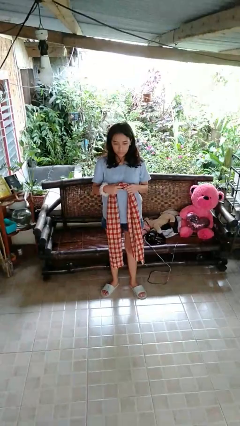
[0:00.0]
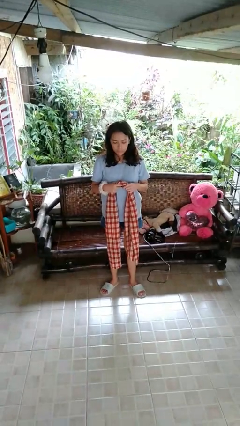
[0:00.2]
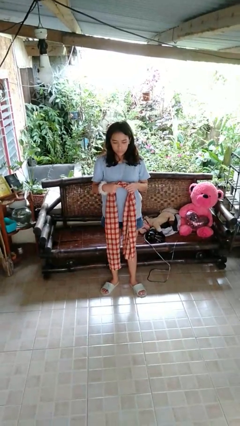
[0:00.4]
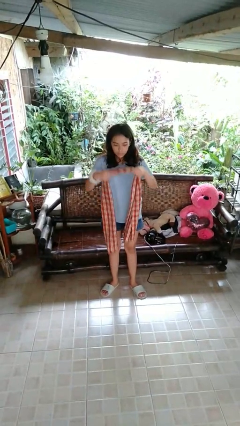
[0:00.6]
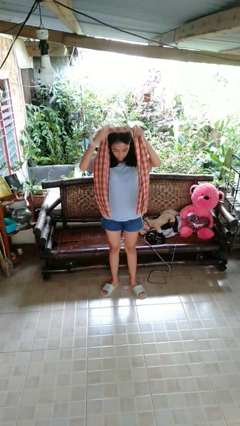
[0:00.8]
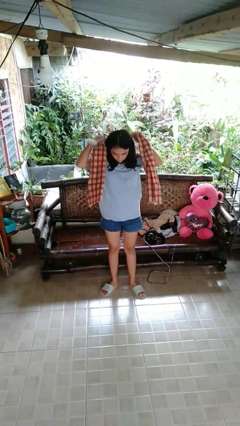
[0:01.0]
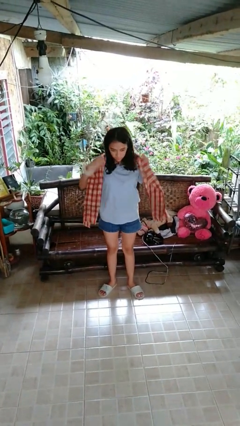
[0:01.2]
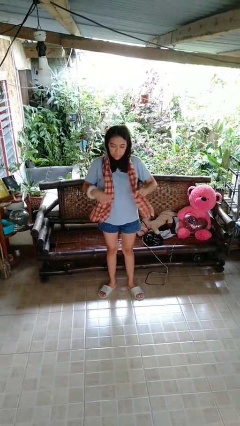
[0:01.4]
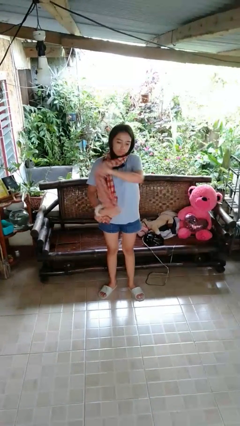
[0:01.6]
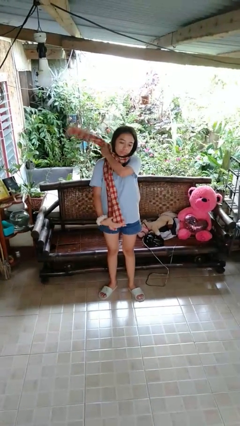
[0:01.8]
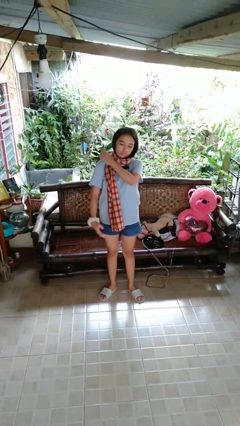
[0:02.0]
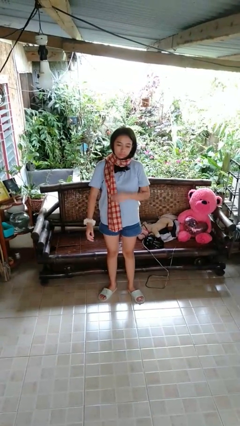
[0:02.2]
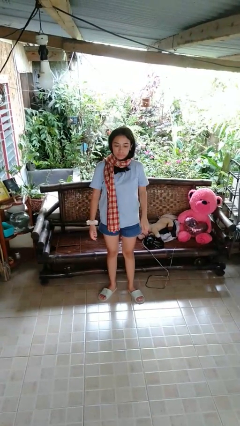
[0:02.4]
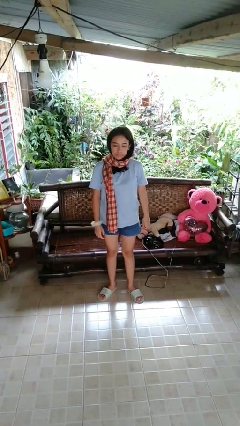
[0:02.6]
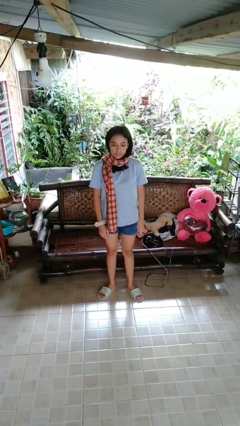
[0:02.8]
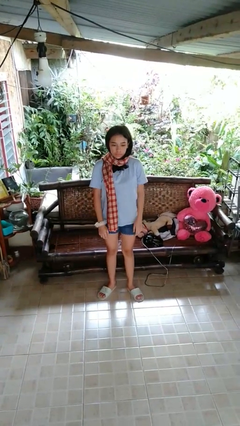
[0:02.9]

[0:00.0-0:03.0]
person puts on scarf

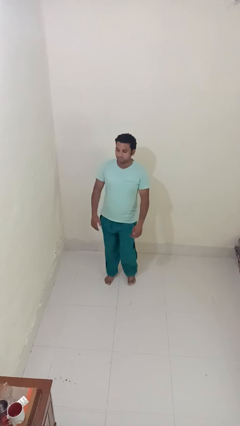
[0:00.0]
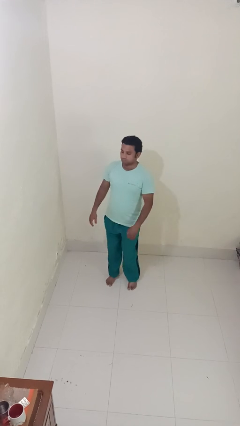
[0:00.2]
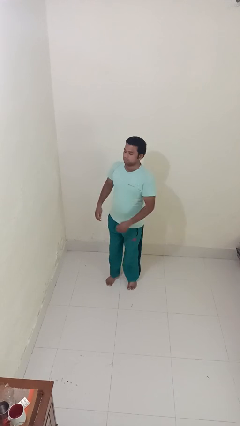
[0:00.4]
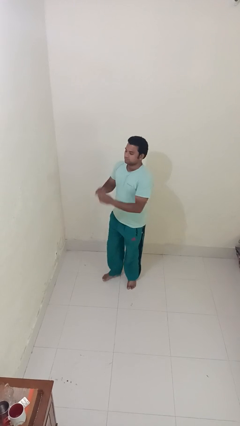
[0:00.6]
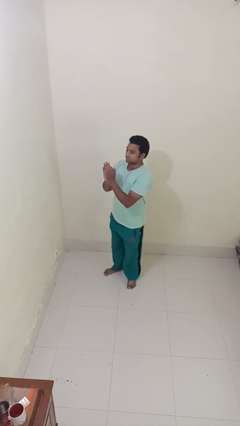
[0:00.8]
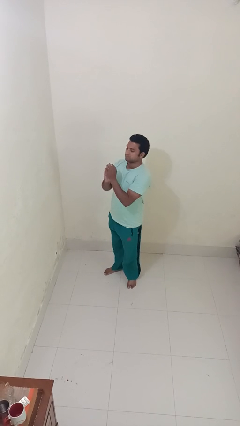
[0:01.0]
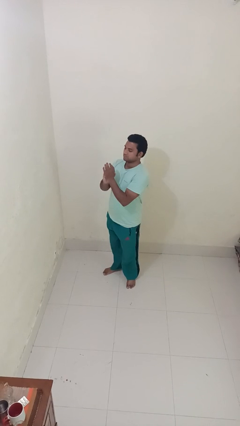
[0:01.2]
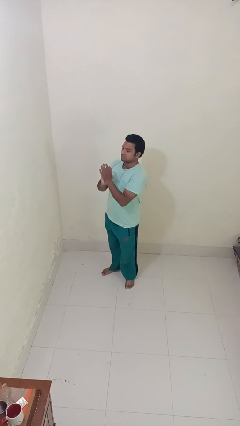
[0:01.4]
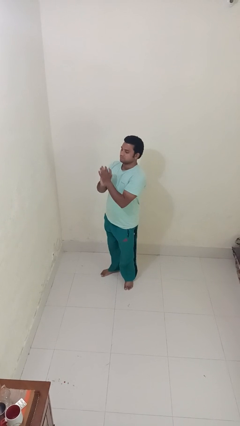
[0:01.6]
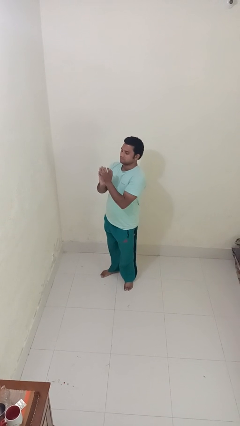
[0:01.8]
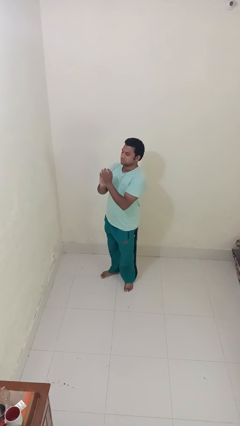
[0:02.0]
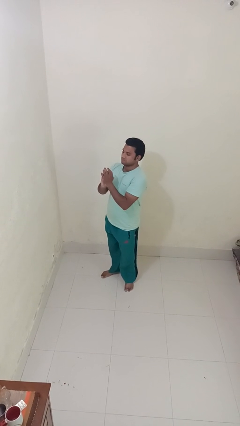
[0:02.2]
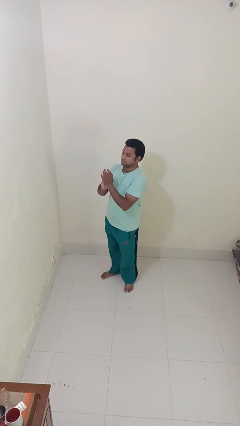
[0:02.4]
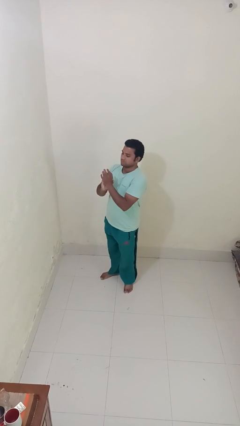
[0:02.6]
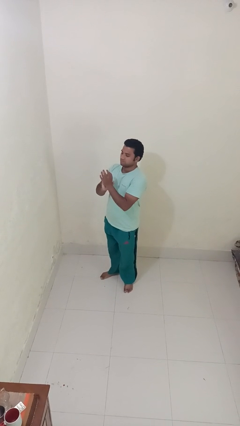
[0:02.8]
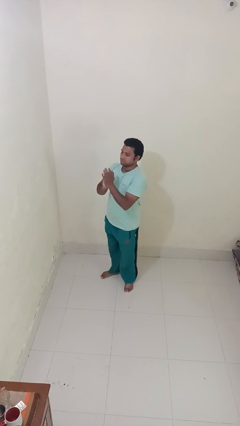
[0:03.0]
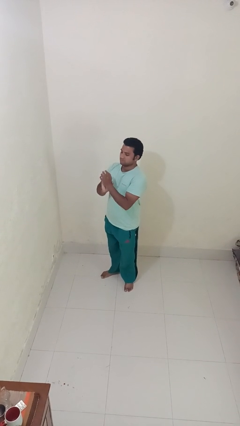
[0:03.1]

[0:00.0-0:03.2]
person claps hands

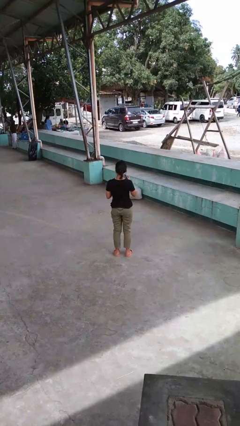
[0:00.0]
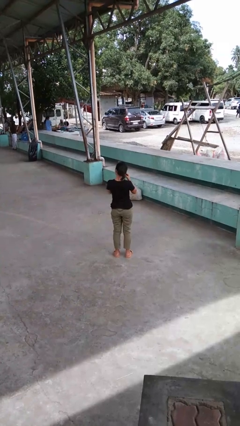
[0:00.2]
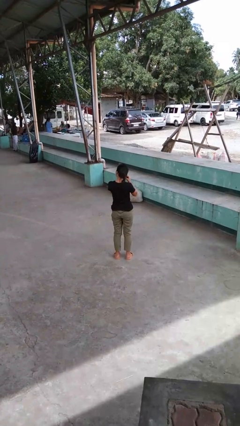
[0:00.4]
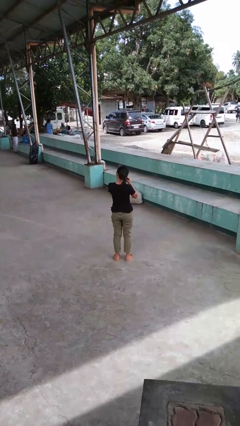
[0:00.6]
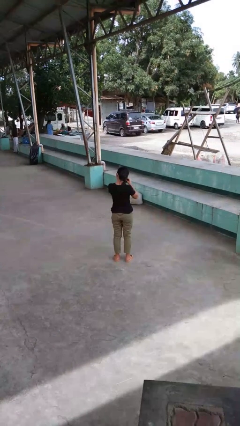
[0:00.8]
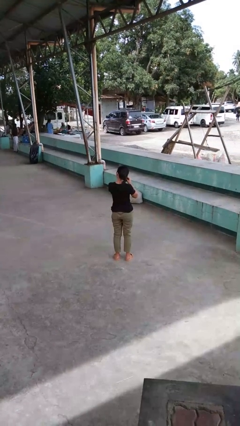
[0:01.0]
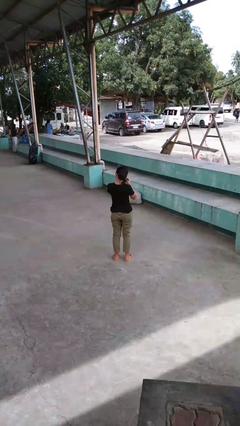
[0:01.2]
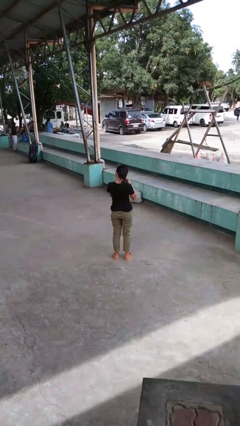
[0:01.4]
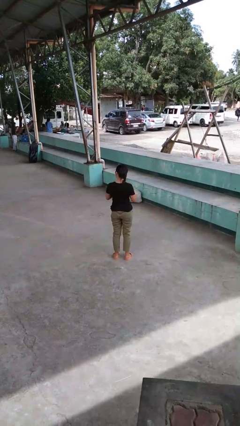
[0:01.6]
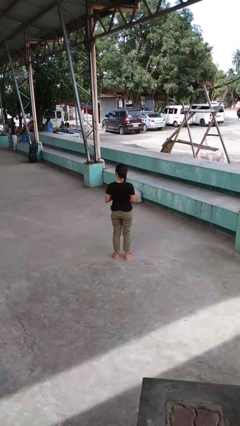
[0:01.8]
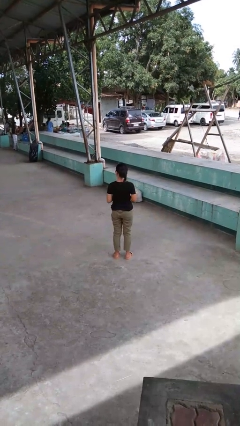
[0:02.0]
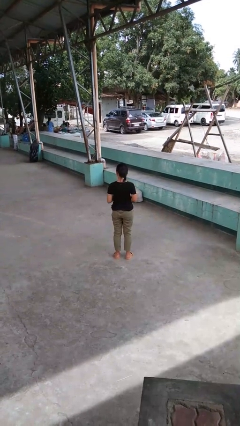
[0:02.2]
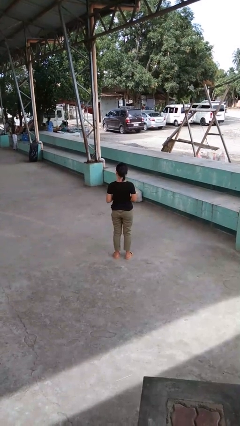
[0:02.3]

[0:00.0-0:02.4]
person takes off earrings

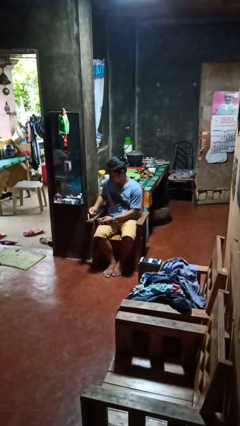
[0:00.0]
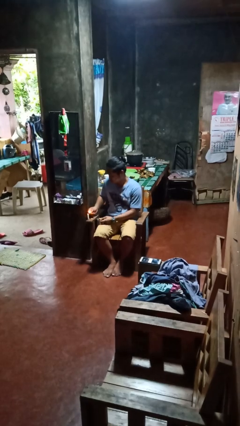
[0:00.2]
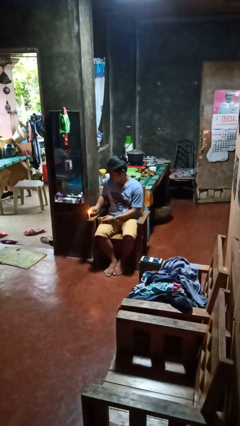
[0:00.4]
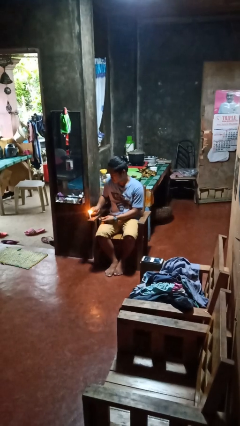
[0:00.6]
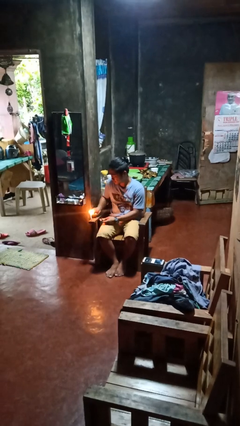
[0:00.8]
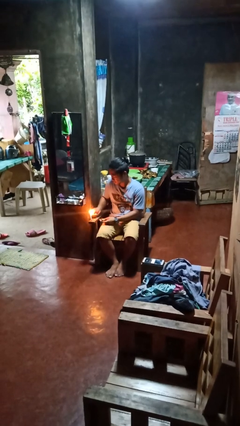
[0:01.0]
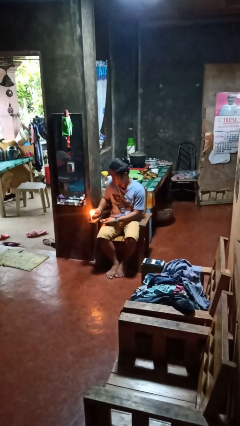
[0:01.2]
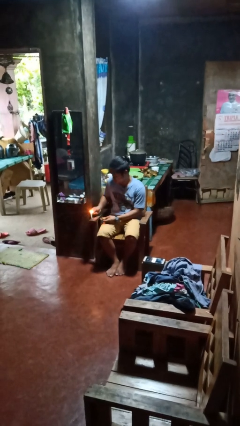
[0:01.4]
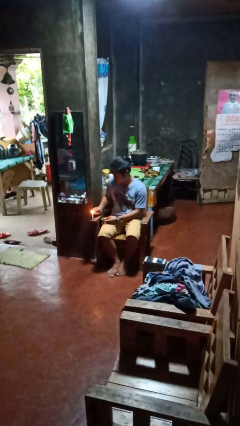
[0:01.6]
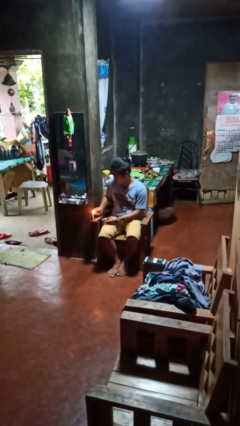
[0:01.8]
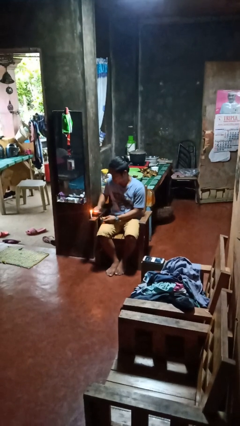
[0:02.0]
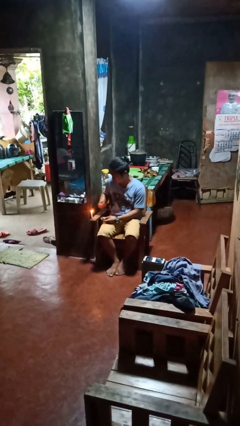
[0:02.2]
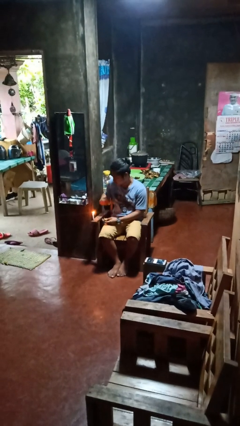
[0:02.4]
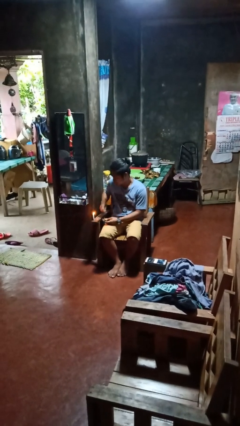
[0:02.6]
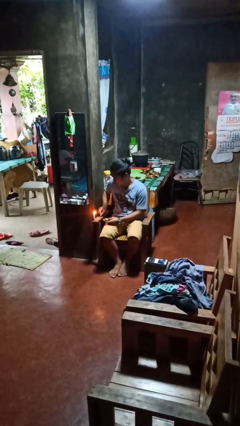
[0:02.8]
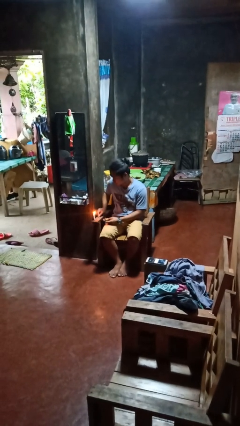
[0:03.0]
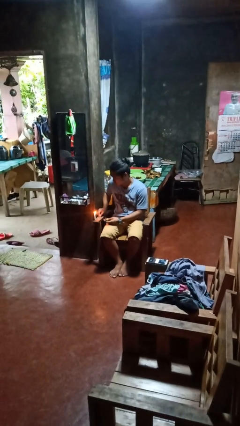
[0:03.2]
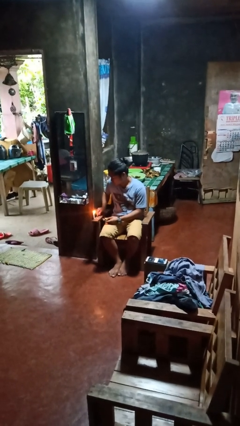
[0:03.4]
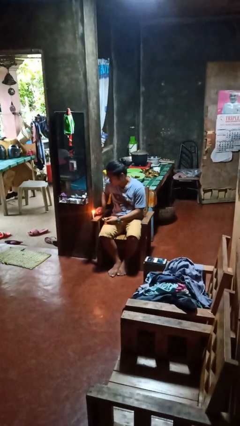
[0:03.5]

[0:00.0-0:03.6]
person lights candle

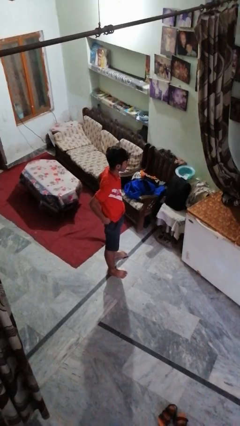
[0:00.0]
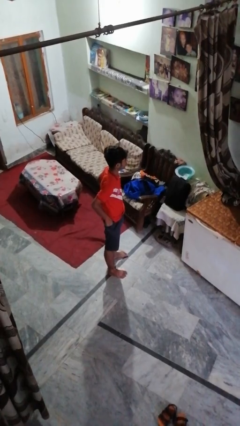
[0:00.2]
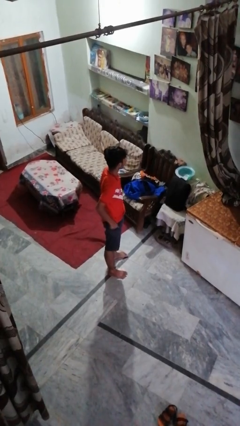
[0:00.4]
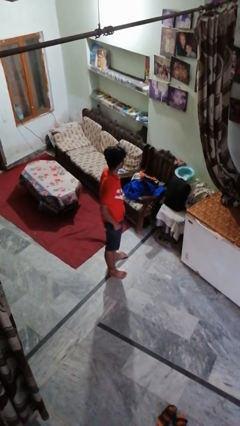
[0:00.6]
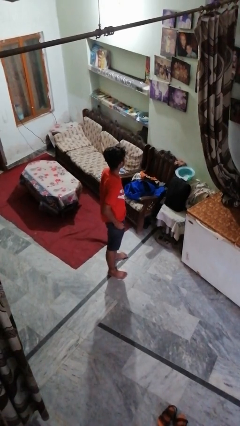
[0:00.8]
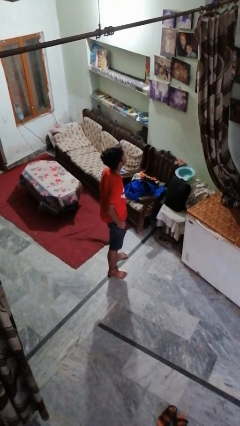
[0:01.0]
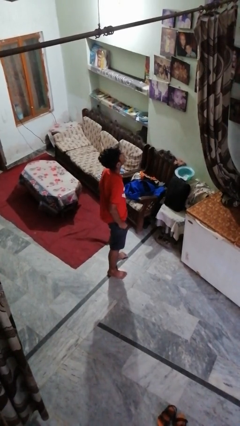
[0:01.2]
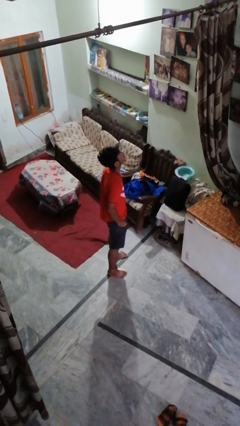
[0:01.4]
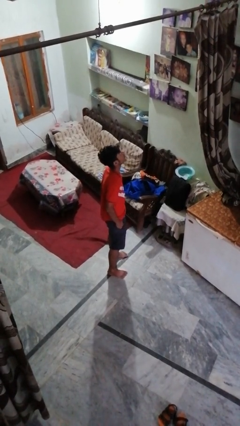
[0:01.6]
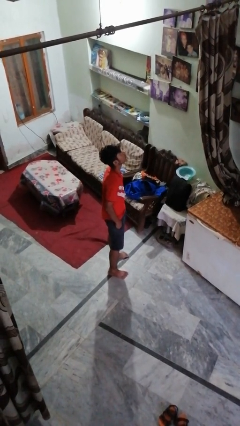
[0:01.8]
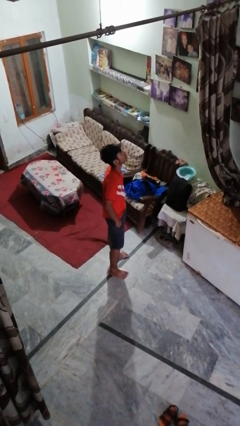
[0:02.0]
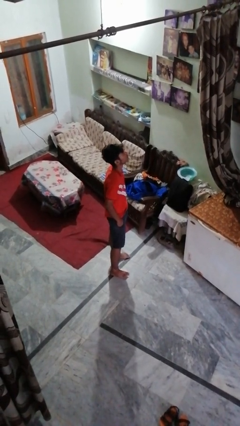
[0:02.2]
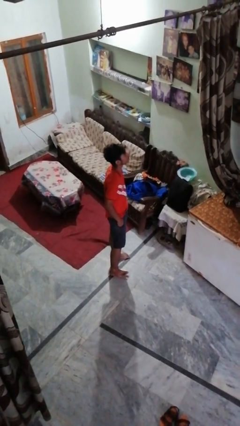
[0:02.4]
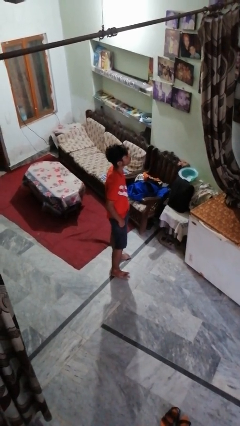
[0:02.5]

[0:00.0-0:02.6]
person puts hands in back pockets

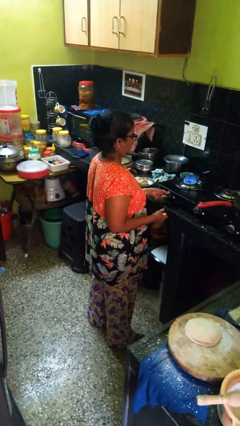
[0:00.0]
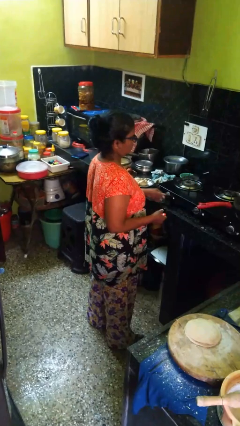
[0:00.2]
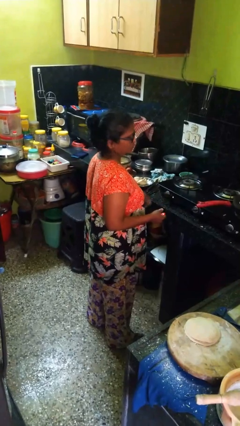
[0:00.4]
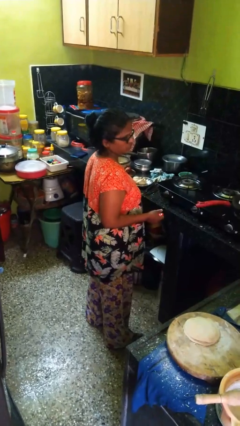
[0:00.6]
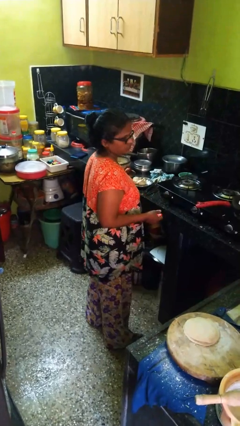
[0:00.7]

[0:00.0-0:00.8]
person turns off stovetop

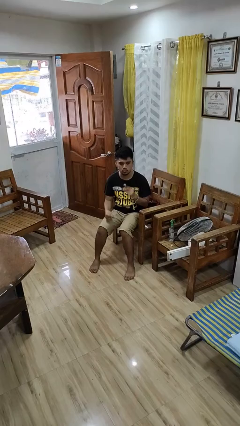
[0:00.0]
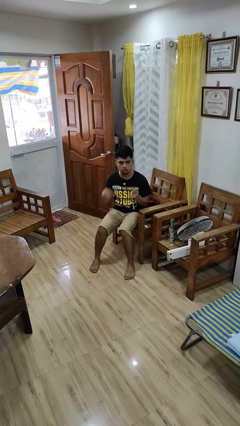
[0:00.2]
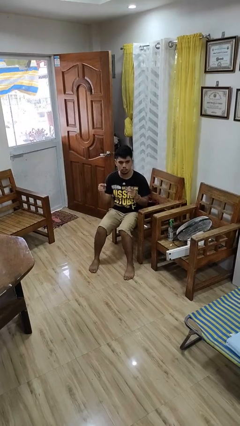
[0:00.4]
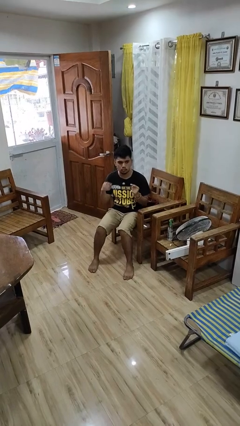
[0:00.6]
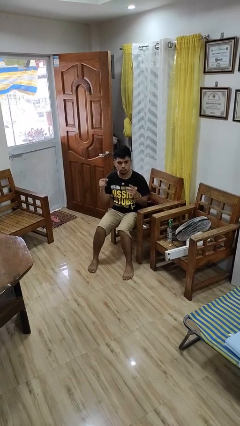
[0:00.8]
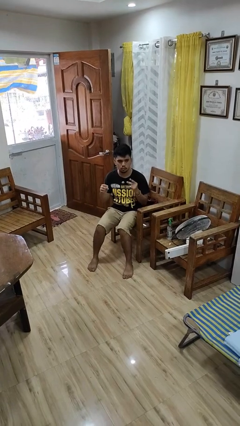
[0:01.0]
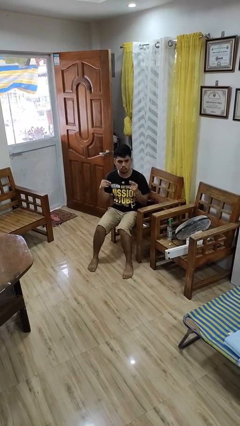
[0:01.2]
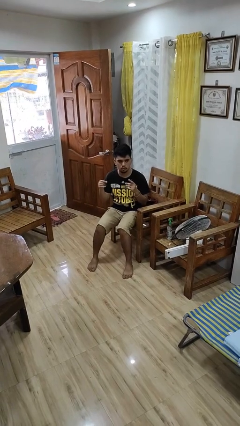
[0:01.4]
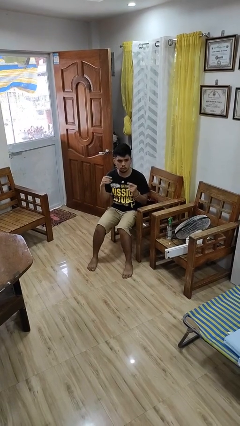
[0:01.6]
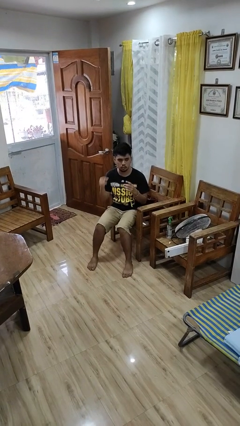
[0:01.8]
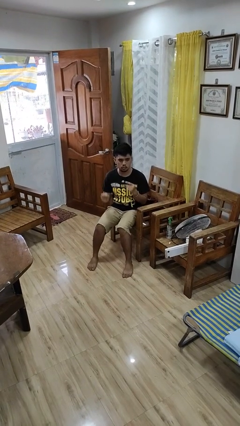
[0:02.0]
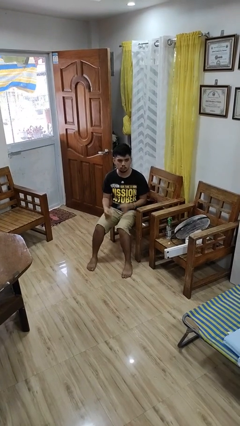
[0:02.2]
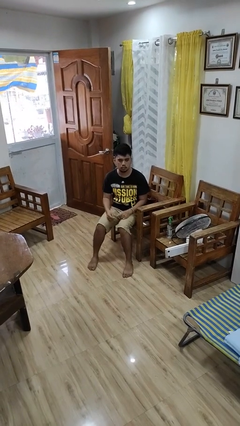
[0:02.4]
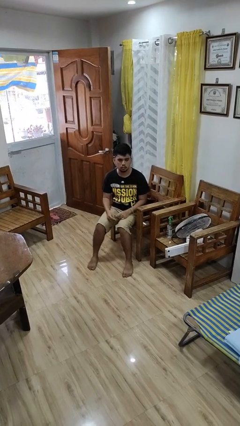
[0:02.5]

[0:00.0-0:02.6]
person snaps fingers
